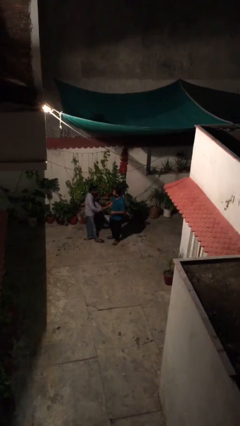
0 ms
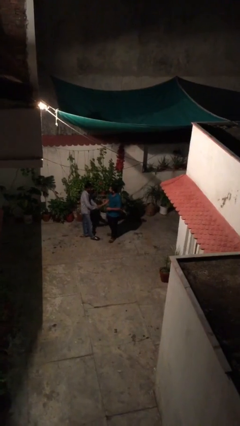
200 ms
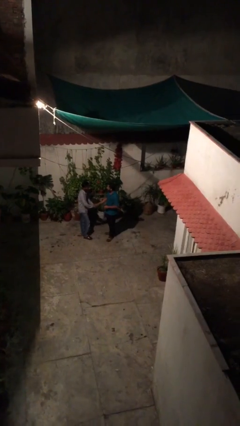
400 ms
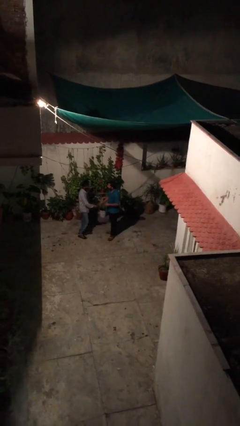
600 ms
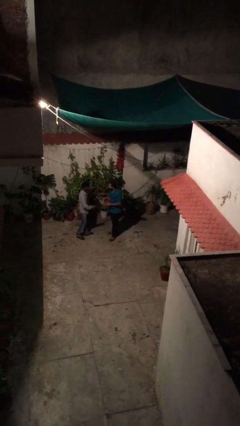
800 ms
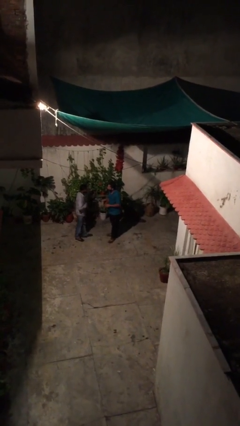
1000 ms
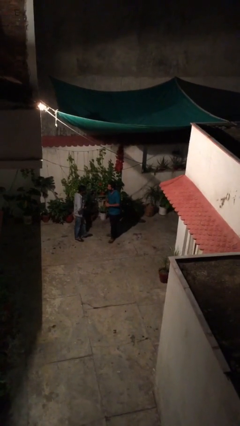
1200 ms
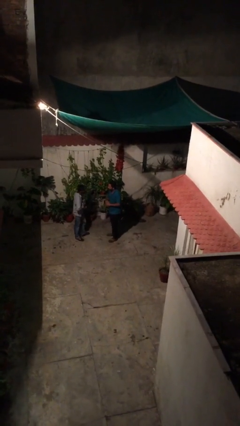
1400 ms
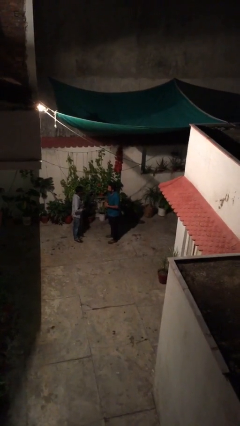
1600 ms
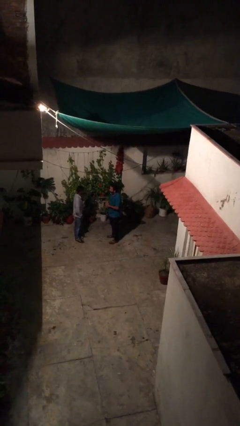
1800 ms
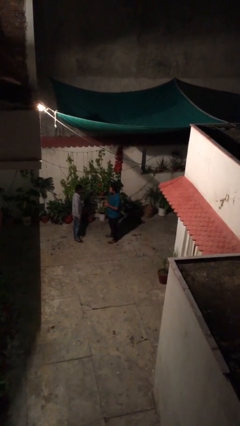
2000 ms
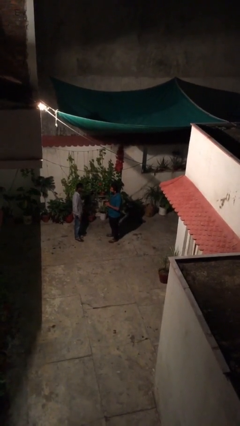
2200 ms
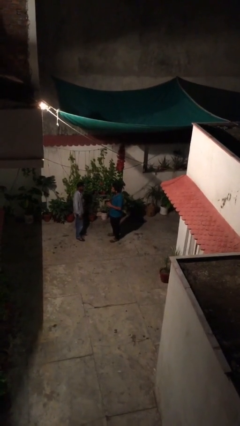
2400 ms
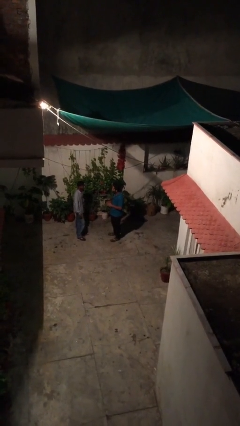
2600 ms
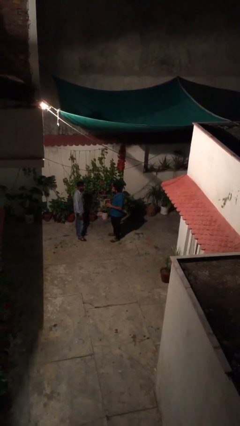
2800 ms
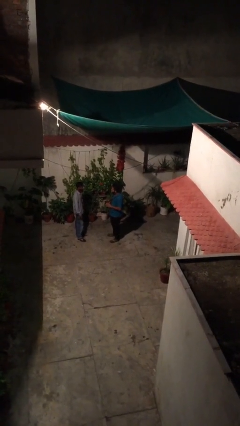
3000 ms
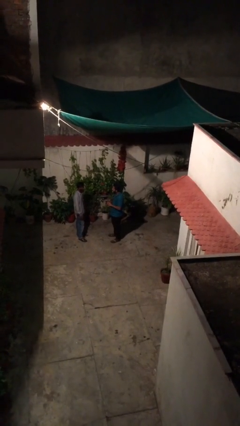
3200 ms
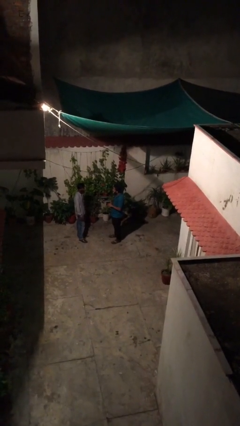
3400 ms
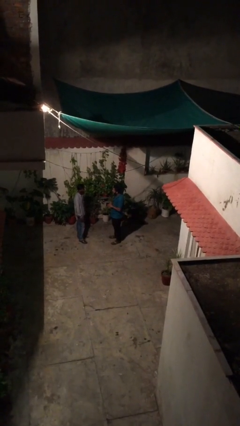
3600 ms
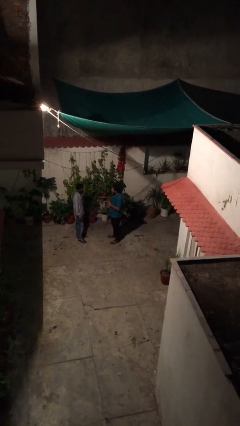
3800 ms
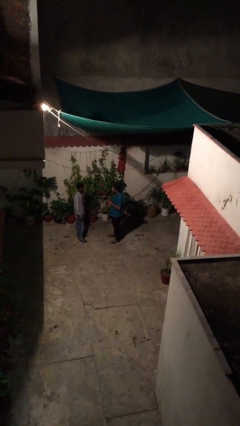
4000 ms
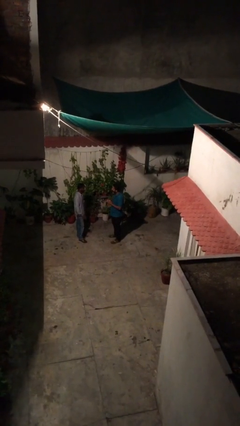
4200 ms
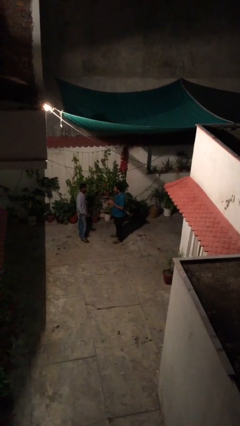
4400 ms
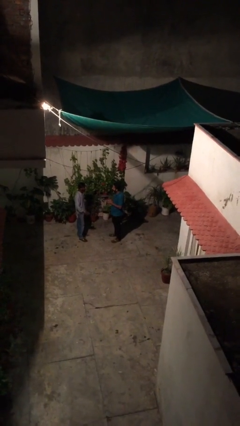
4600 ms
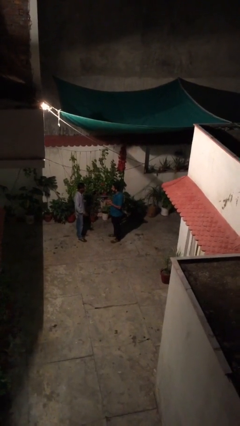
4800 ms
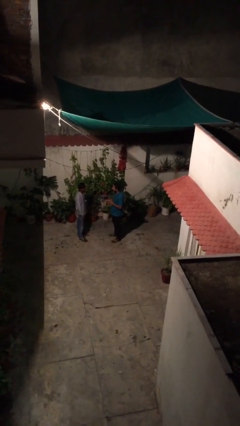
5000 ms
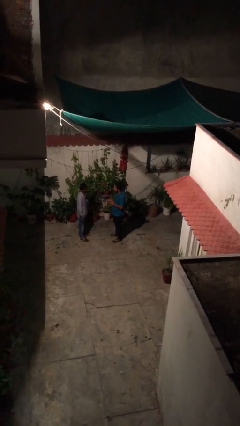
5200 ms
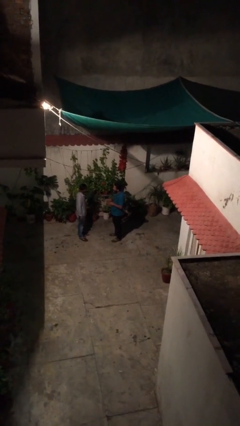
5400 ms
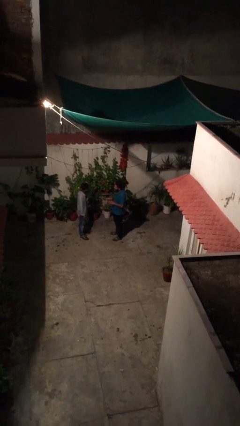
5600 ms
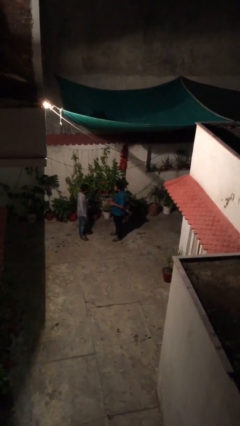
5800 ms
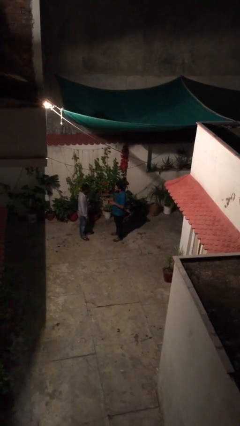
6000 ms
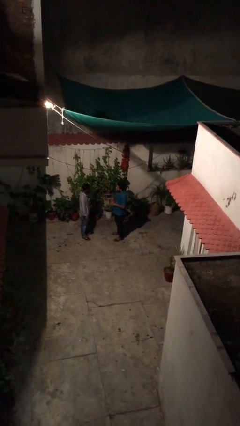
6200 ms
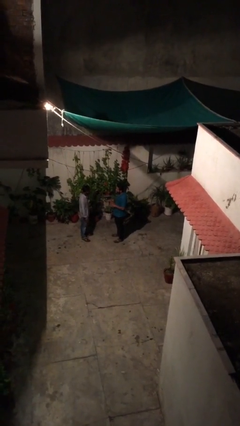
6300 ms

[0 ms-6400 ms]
person talks to person

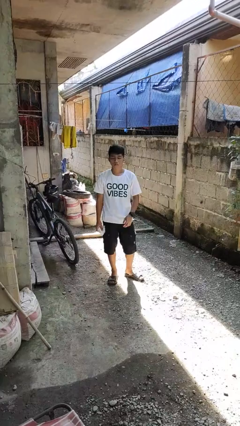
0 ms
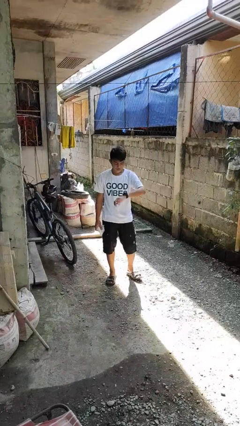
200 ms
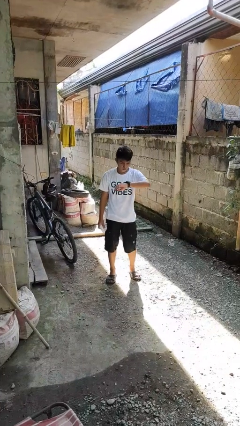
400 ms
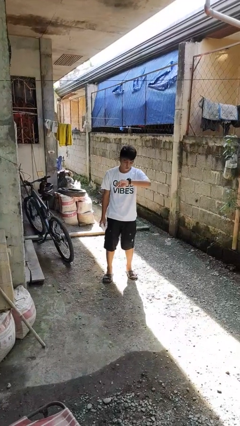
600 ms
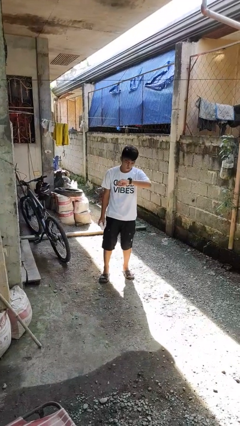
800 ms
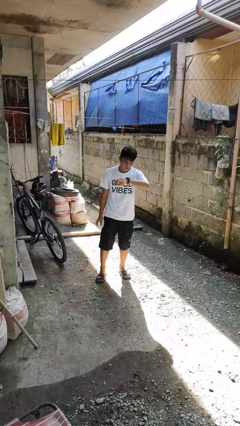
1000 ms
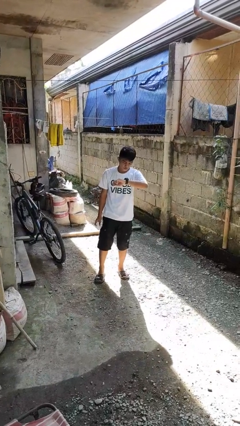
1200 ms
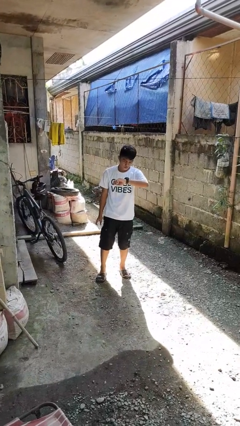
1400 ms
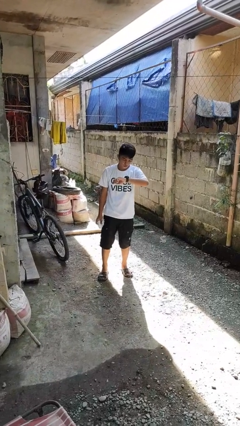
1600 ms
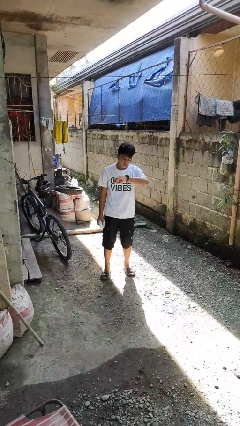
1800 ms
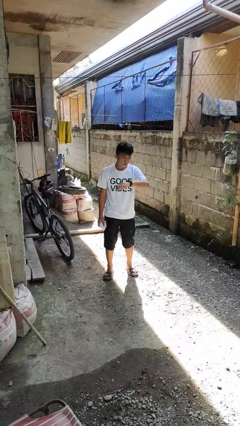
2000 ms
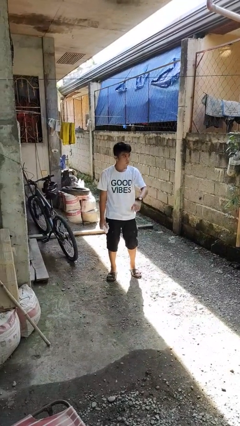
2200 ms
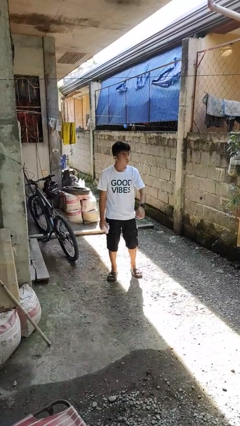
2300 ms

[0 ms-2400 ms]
person looks at wristwatch

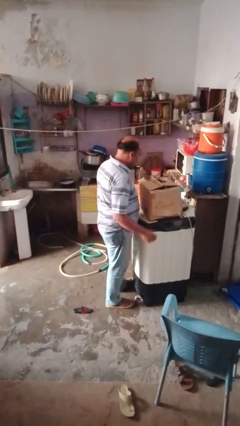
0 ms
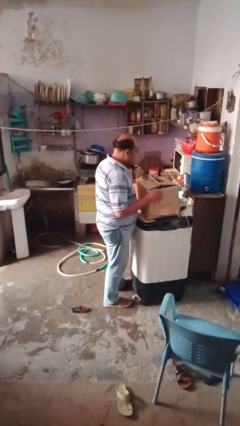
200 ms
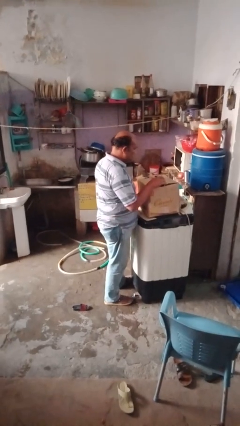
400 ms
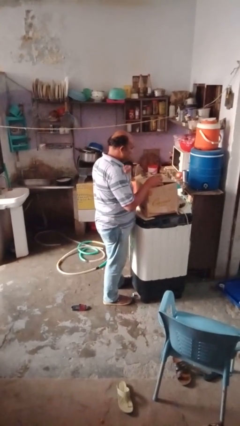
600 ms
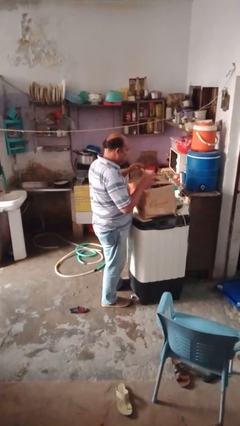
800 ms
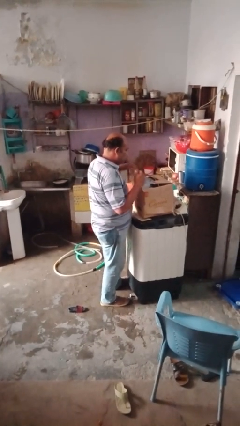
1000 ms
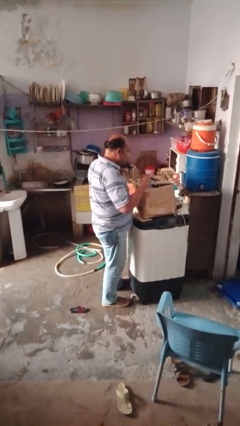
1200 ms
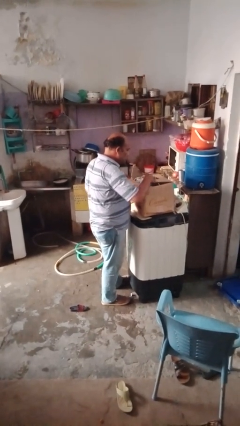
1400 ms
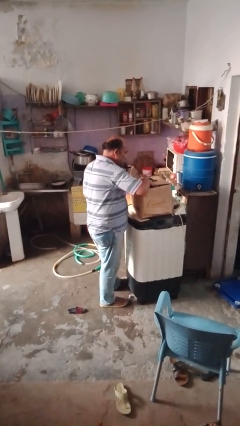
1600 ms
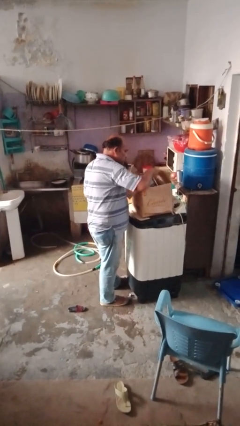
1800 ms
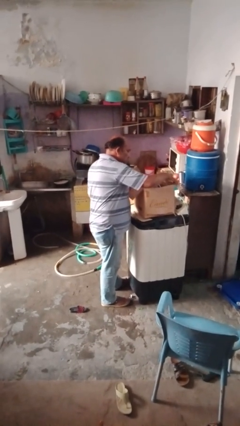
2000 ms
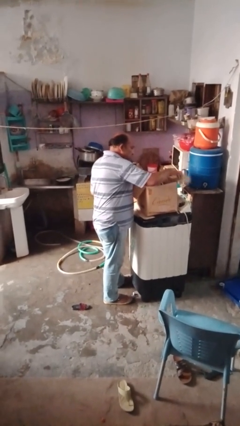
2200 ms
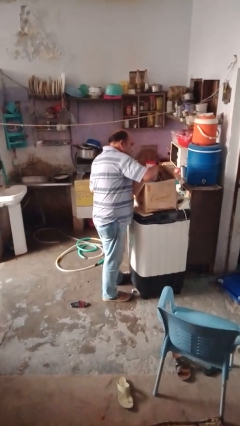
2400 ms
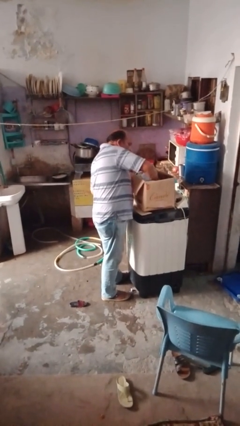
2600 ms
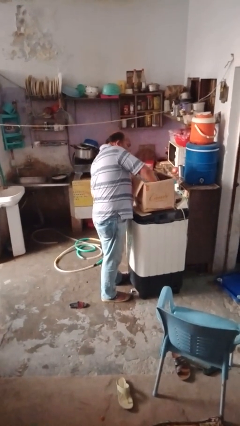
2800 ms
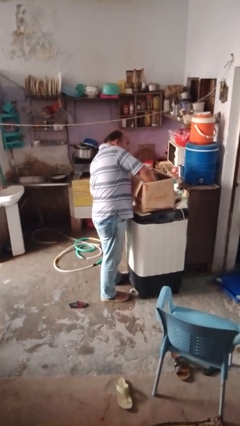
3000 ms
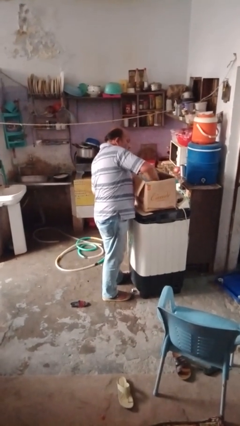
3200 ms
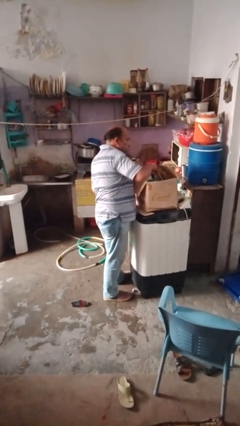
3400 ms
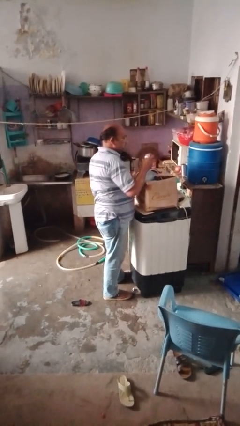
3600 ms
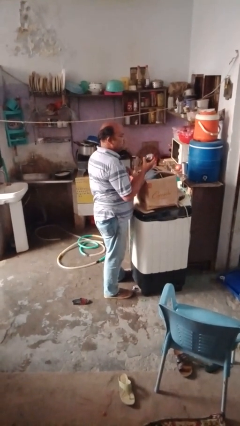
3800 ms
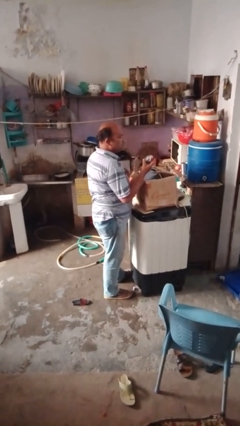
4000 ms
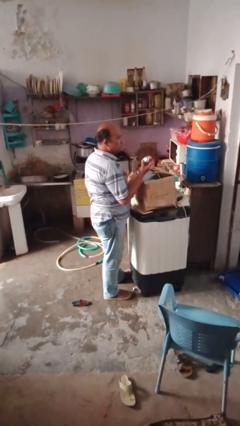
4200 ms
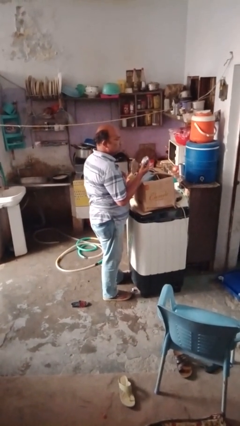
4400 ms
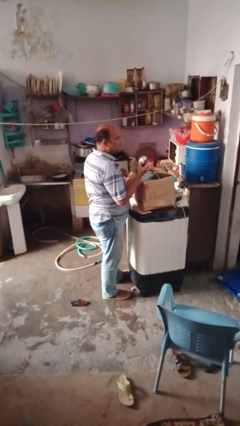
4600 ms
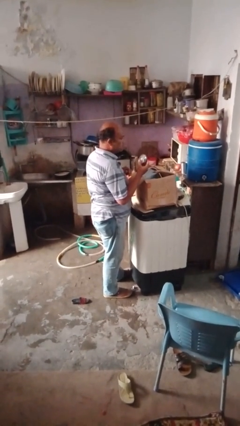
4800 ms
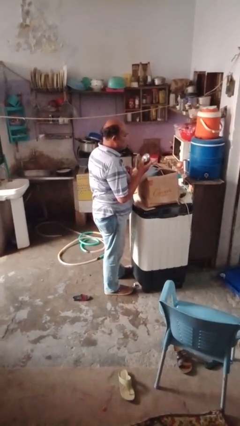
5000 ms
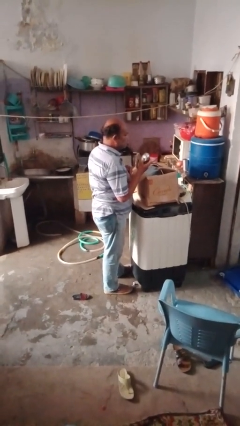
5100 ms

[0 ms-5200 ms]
person takes object from box

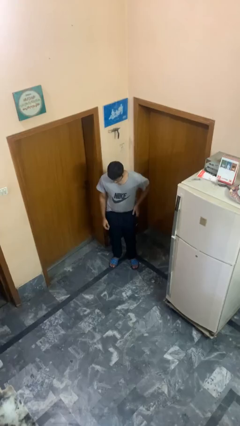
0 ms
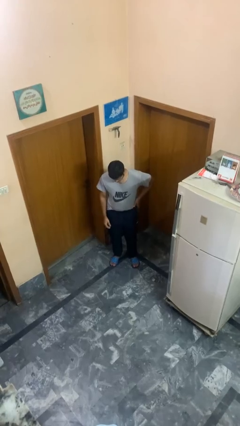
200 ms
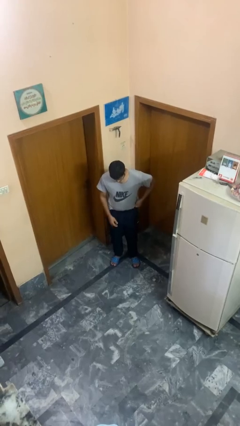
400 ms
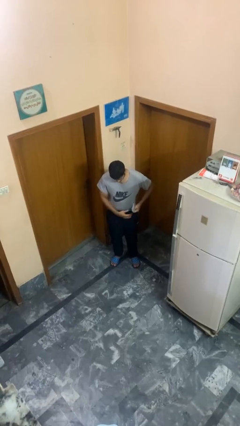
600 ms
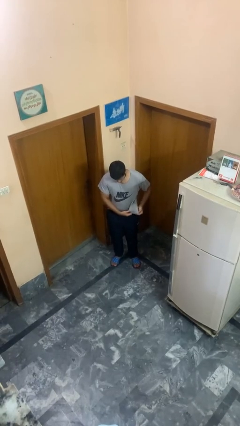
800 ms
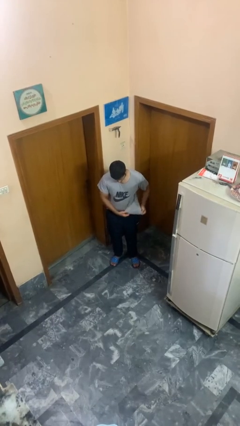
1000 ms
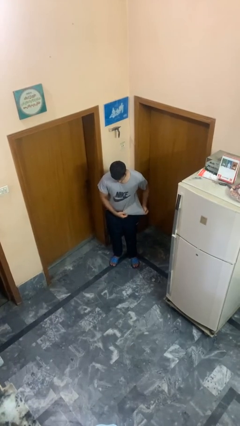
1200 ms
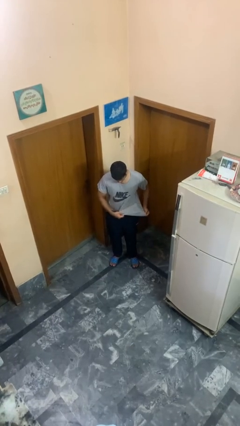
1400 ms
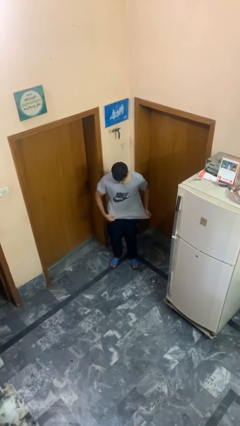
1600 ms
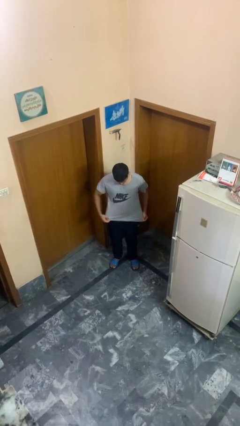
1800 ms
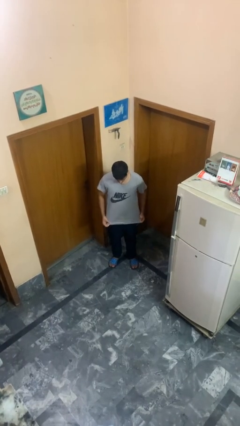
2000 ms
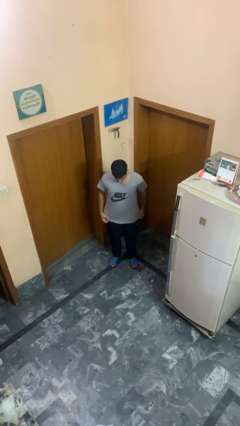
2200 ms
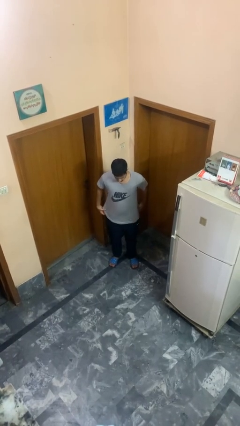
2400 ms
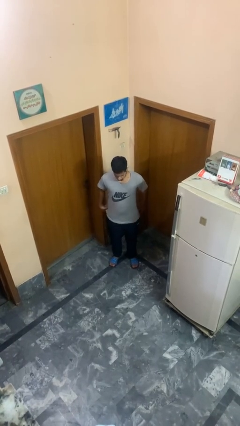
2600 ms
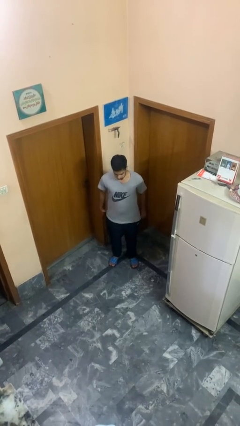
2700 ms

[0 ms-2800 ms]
person untucks shirt

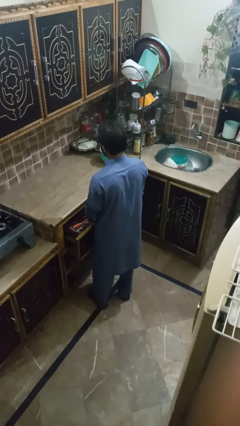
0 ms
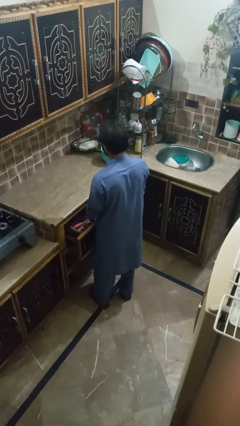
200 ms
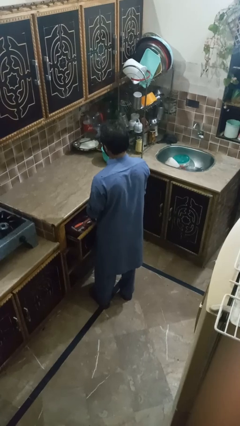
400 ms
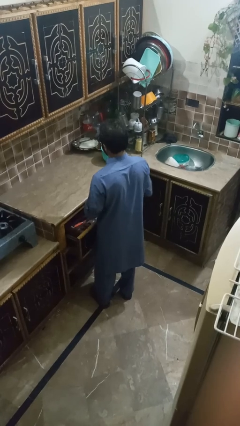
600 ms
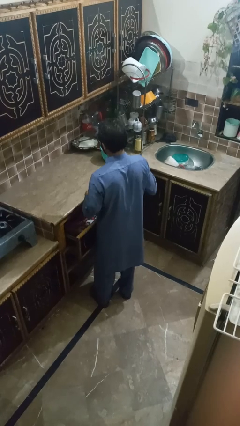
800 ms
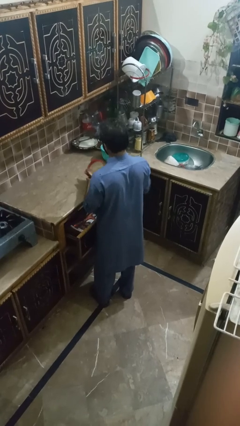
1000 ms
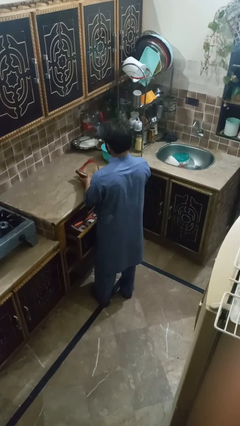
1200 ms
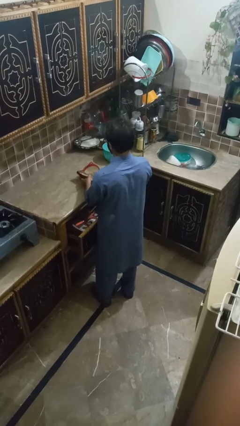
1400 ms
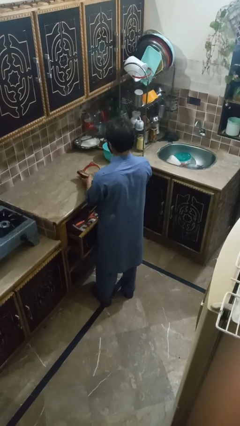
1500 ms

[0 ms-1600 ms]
person takes object from kitchen drawer
